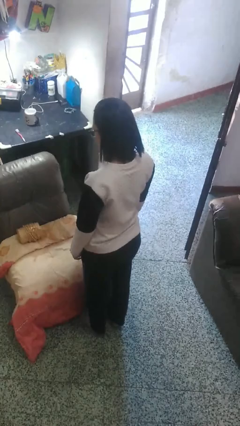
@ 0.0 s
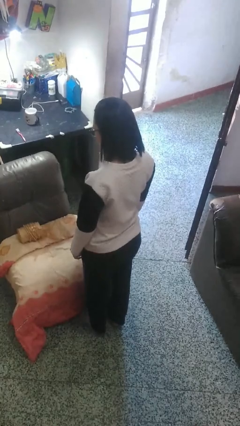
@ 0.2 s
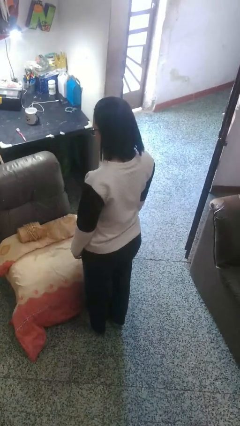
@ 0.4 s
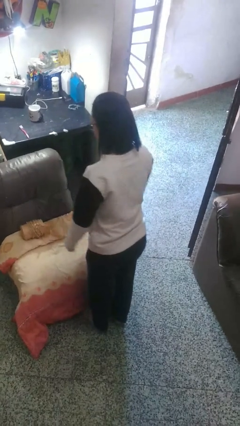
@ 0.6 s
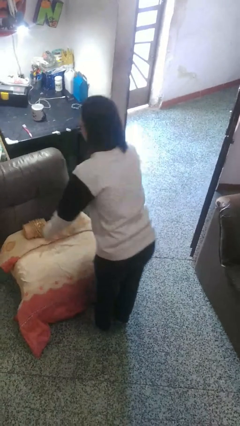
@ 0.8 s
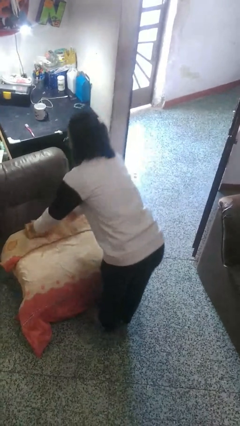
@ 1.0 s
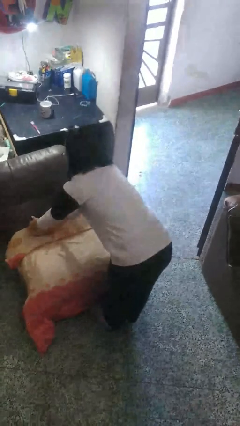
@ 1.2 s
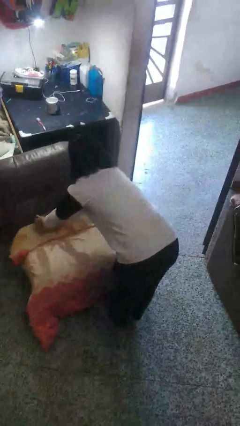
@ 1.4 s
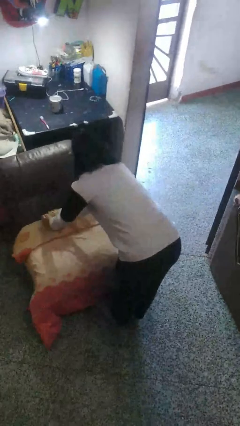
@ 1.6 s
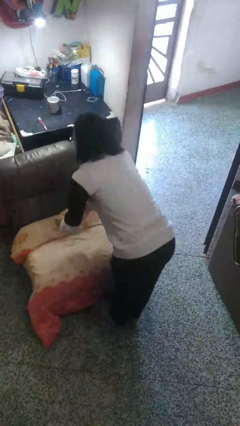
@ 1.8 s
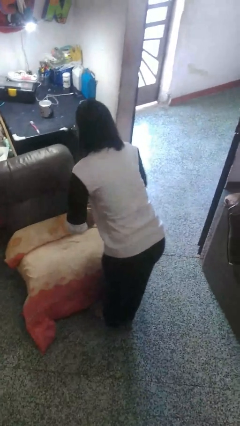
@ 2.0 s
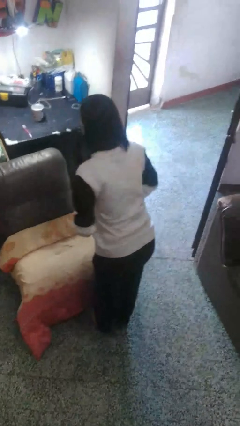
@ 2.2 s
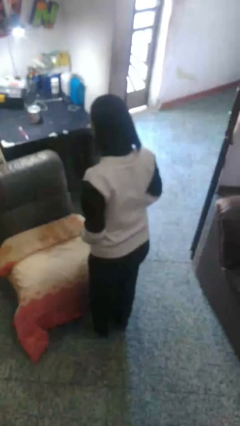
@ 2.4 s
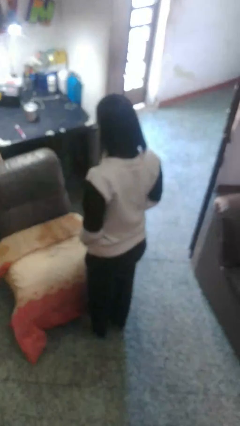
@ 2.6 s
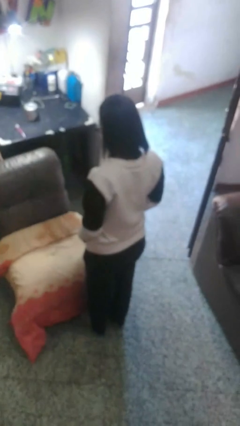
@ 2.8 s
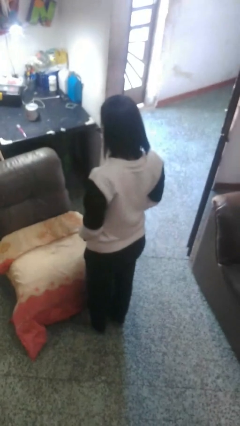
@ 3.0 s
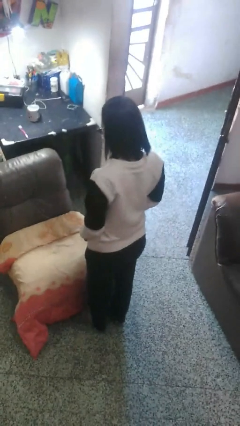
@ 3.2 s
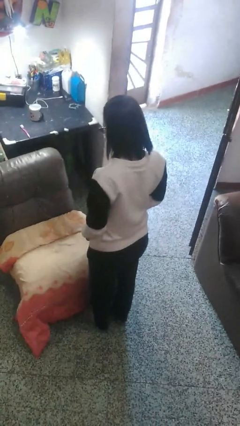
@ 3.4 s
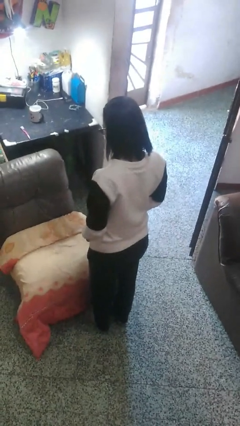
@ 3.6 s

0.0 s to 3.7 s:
person picks up object from couch

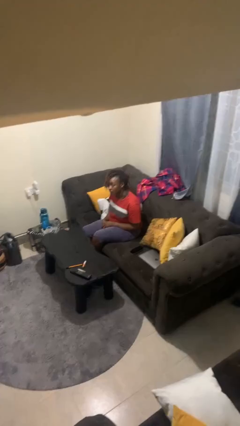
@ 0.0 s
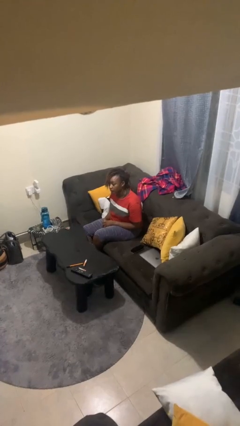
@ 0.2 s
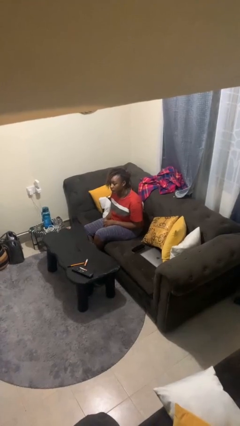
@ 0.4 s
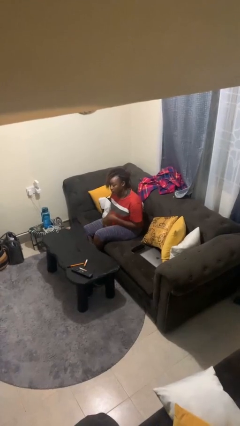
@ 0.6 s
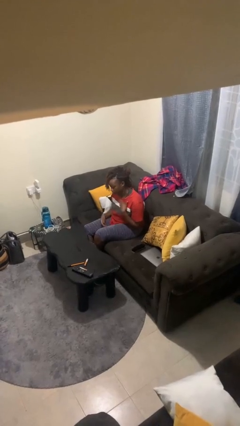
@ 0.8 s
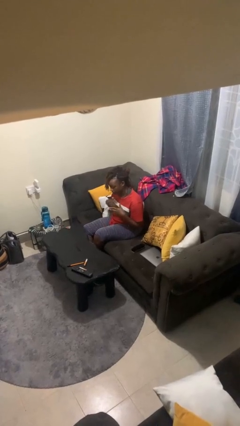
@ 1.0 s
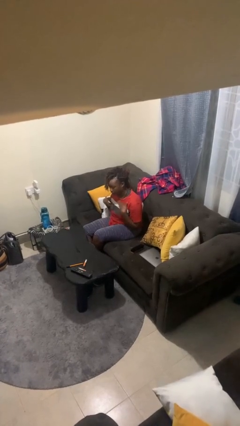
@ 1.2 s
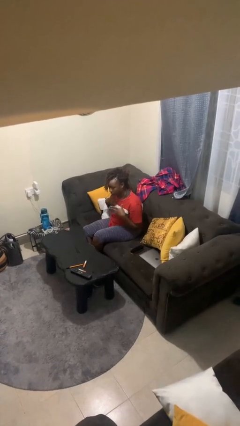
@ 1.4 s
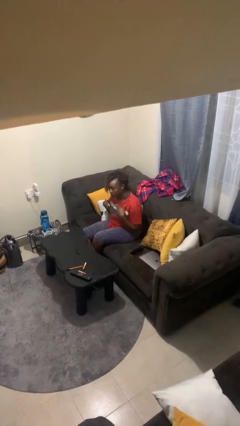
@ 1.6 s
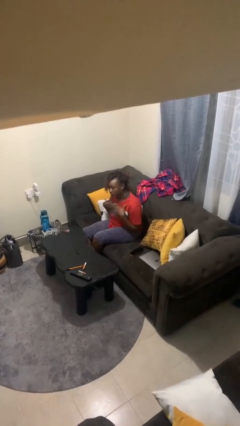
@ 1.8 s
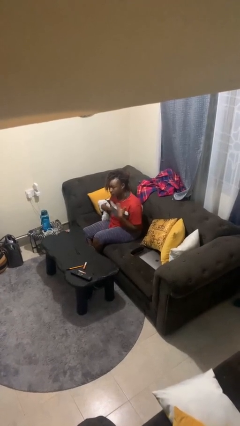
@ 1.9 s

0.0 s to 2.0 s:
person drums on chest

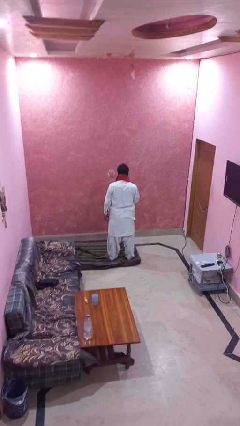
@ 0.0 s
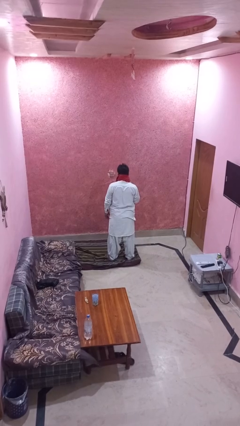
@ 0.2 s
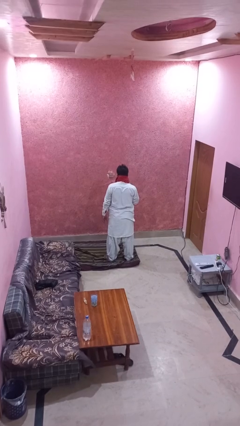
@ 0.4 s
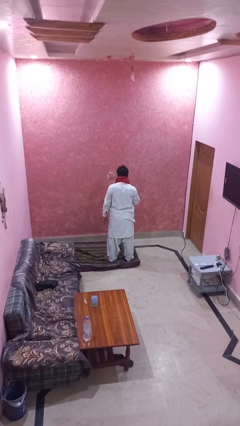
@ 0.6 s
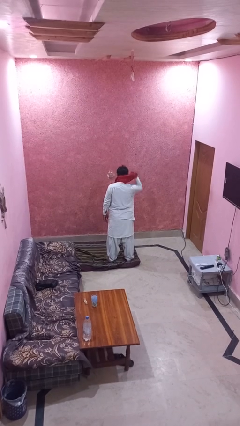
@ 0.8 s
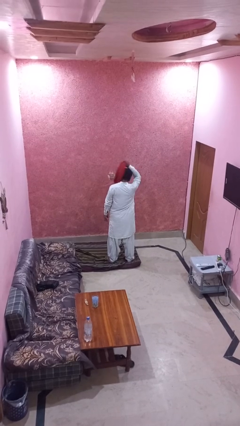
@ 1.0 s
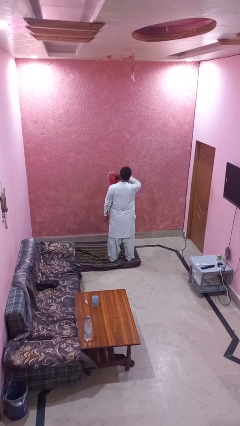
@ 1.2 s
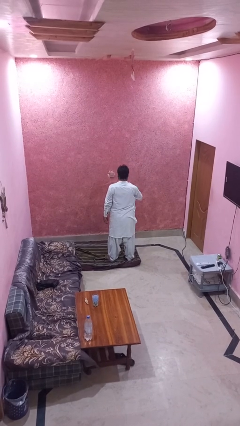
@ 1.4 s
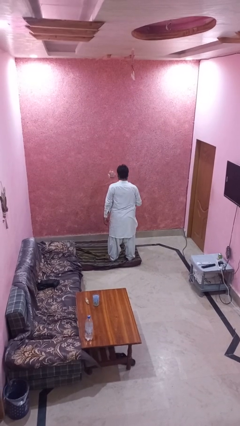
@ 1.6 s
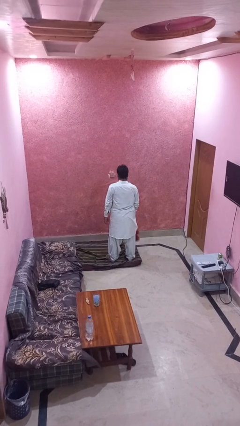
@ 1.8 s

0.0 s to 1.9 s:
person takes off scarf

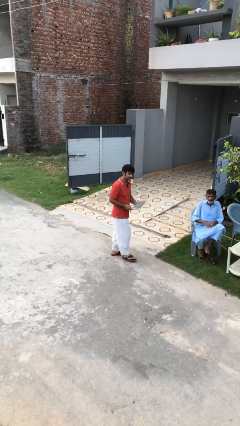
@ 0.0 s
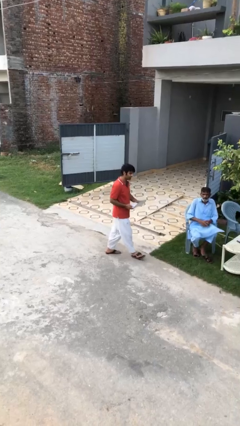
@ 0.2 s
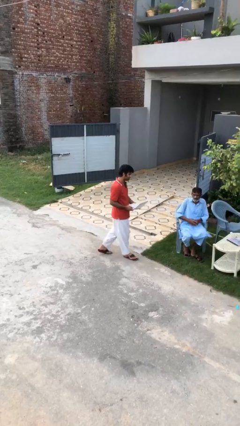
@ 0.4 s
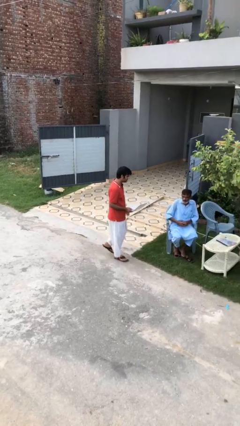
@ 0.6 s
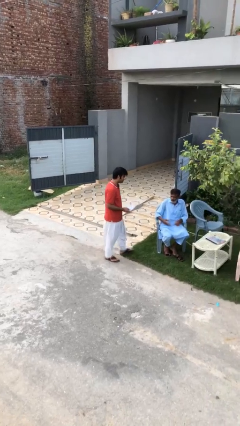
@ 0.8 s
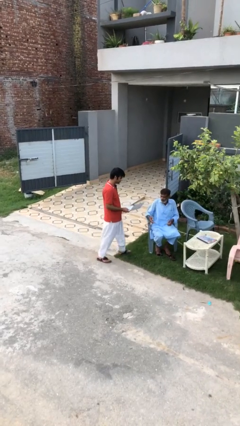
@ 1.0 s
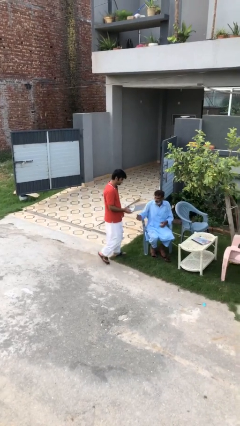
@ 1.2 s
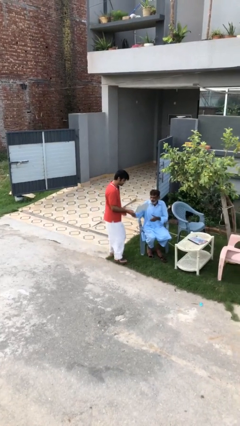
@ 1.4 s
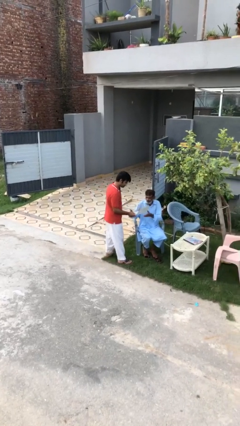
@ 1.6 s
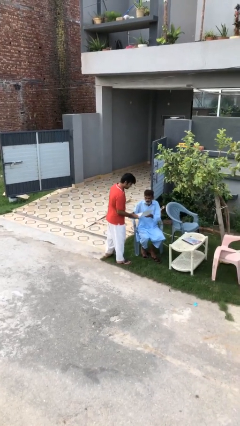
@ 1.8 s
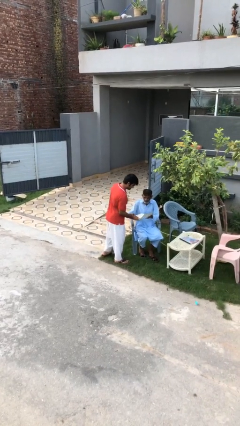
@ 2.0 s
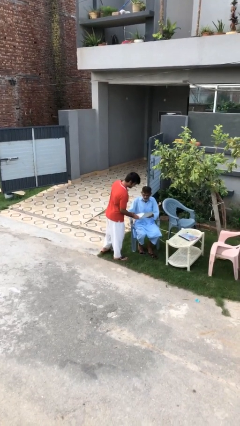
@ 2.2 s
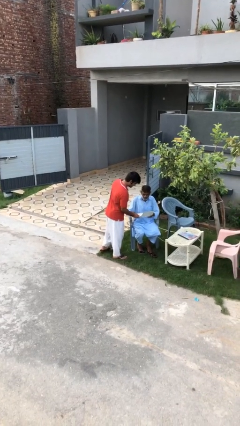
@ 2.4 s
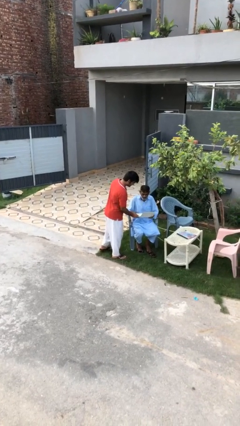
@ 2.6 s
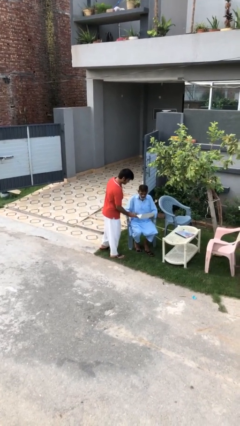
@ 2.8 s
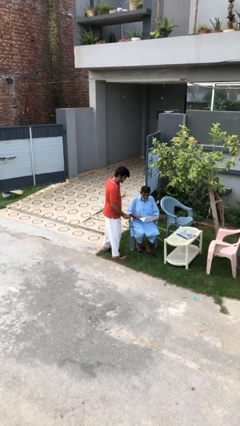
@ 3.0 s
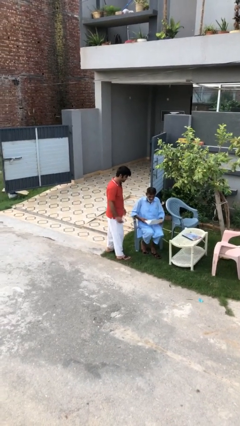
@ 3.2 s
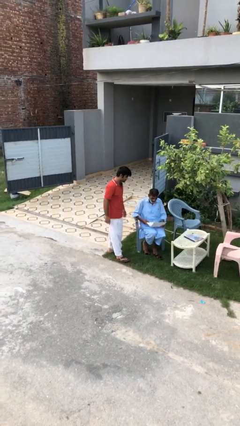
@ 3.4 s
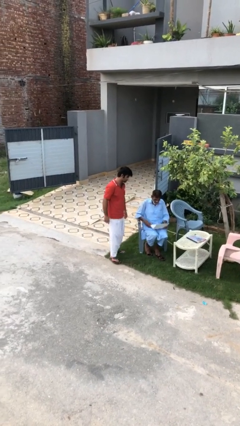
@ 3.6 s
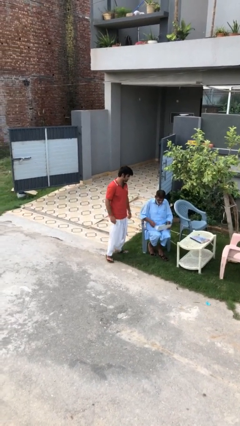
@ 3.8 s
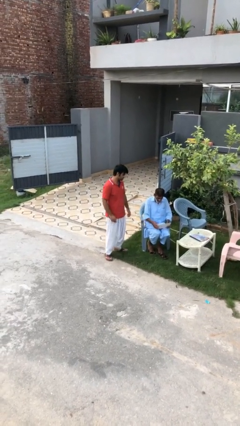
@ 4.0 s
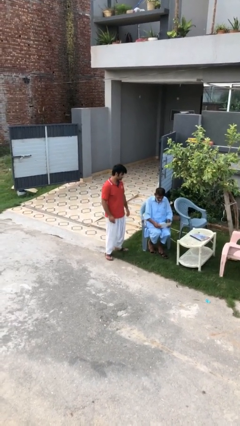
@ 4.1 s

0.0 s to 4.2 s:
person transfers object to person

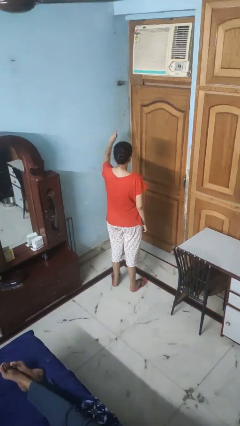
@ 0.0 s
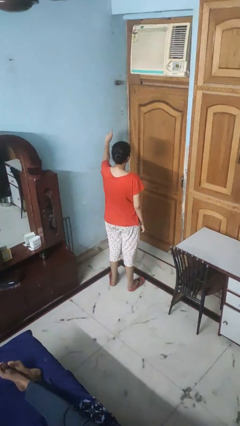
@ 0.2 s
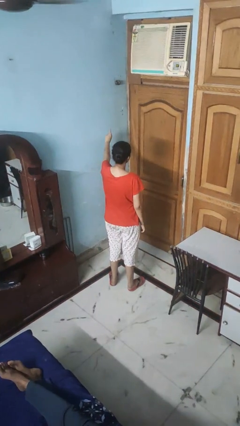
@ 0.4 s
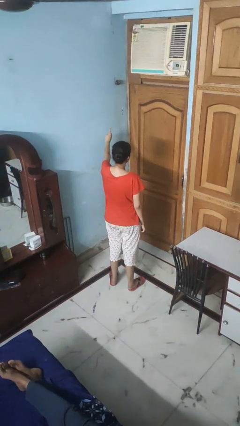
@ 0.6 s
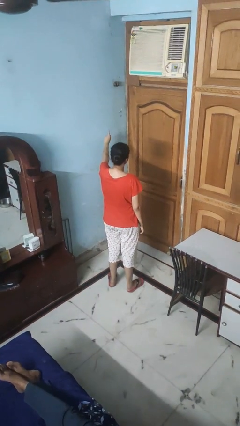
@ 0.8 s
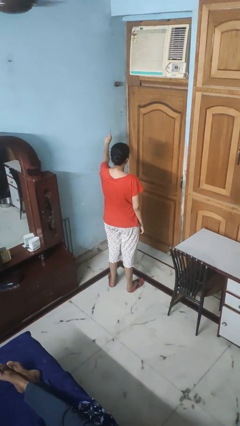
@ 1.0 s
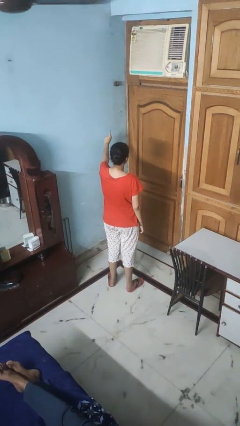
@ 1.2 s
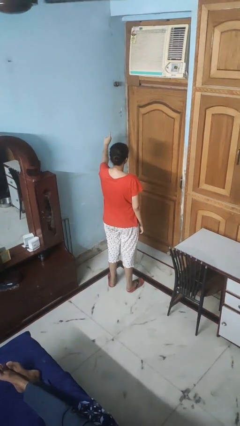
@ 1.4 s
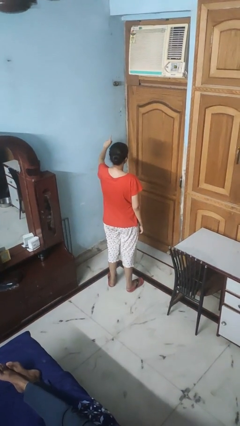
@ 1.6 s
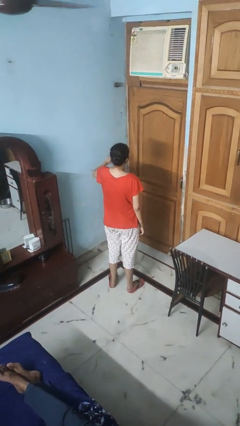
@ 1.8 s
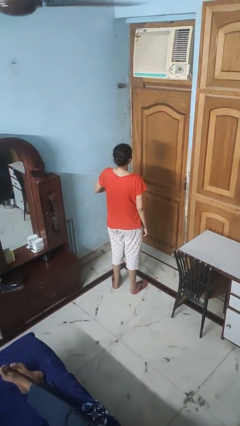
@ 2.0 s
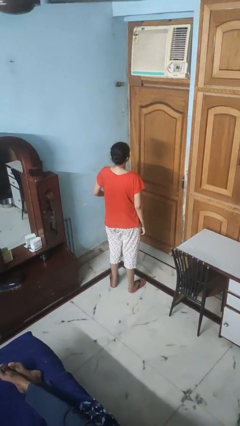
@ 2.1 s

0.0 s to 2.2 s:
person gestures number one

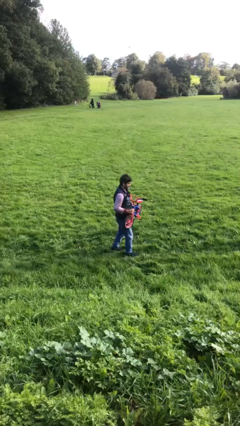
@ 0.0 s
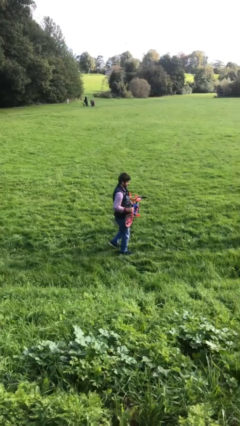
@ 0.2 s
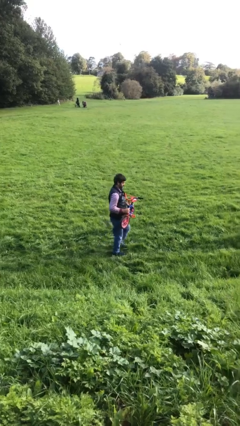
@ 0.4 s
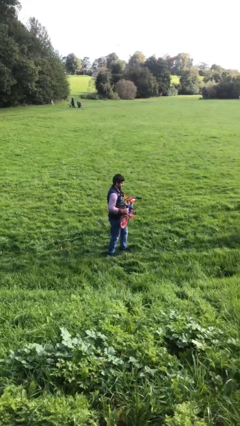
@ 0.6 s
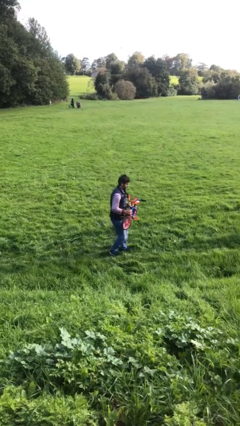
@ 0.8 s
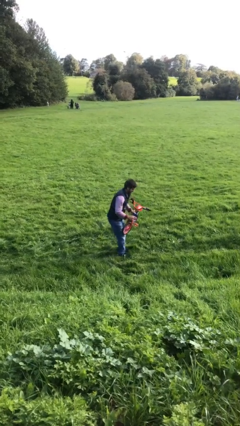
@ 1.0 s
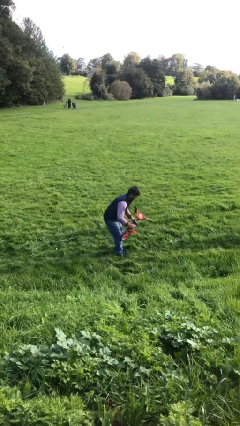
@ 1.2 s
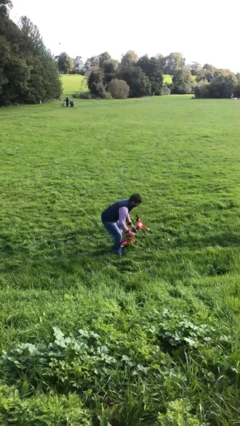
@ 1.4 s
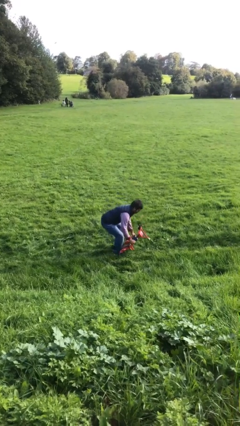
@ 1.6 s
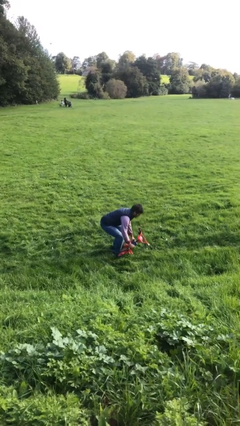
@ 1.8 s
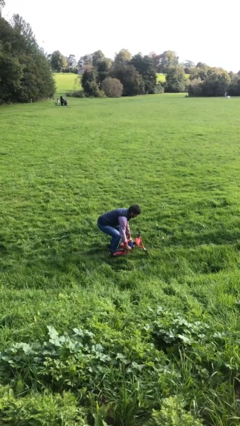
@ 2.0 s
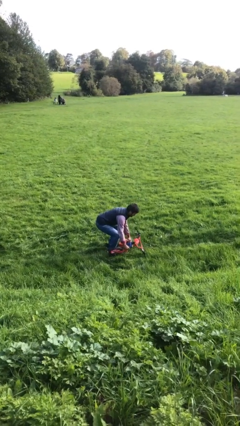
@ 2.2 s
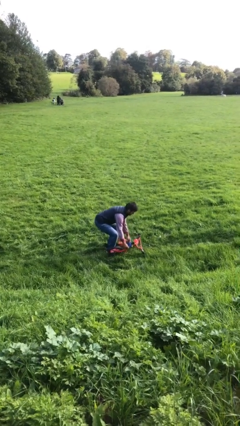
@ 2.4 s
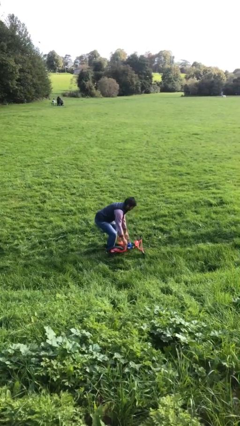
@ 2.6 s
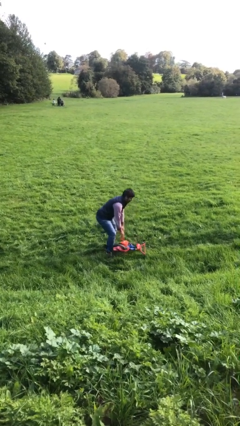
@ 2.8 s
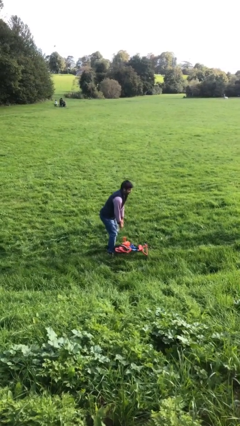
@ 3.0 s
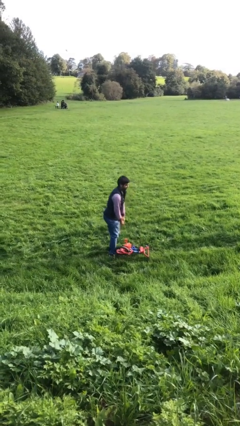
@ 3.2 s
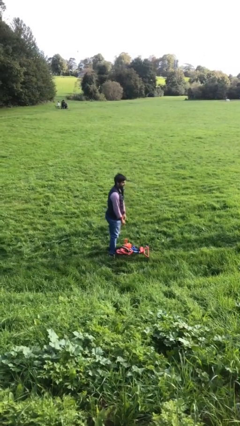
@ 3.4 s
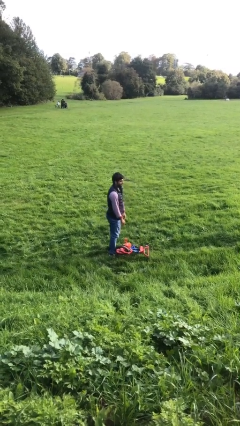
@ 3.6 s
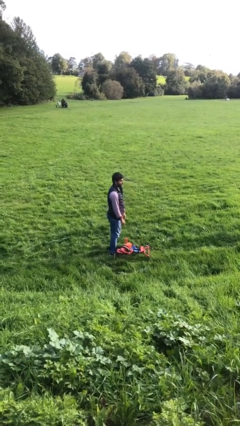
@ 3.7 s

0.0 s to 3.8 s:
person puts down object on floor
